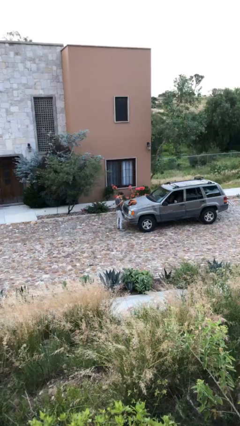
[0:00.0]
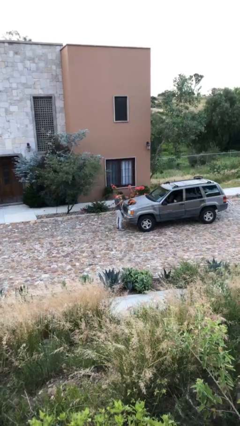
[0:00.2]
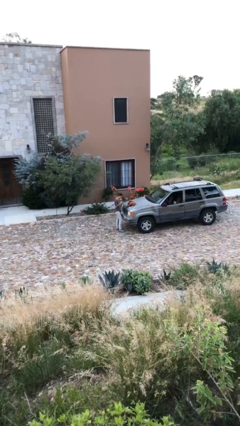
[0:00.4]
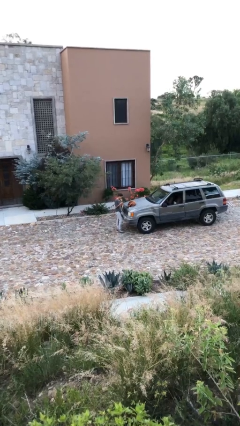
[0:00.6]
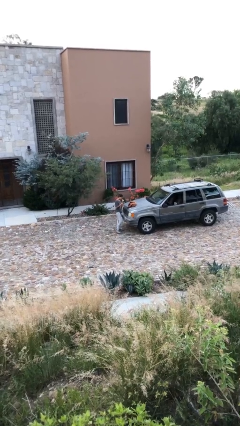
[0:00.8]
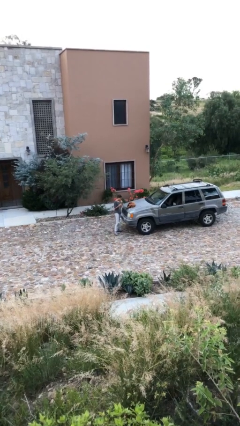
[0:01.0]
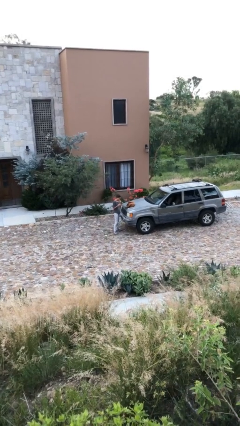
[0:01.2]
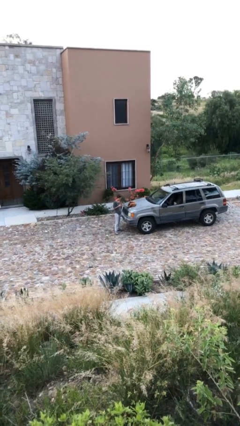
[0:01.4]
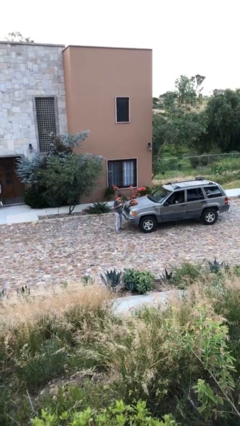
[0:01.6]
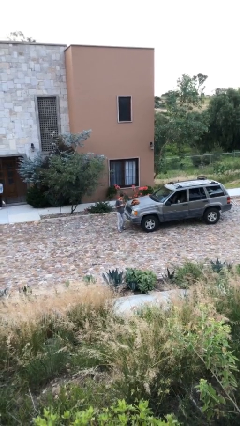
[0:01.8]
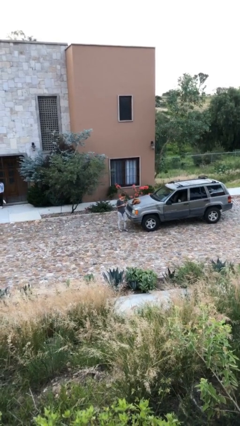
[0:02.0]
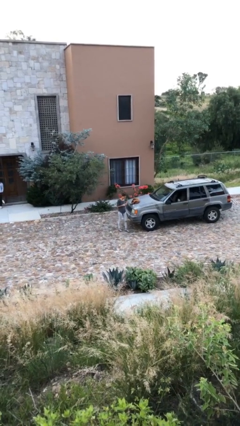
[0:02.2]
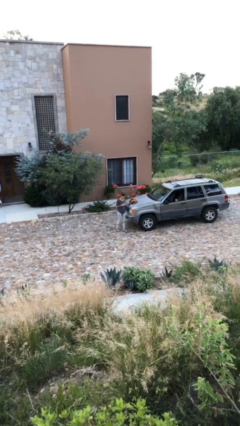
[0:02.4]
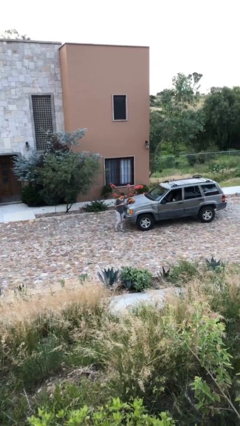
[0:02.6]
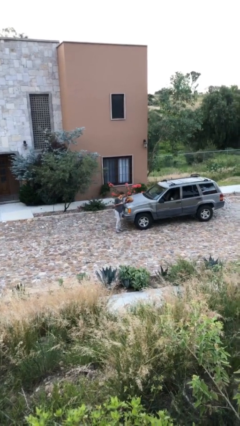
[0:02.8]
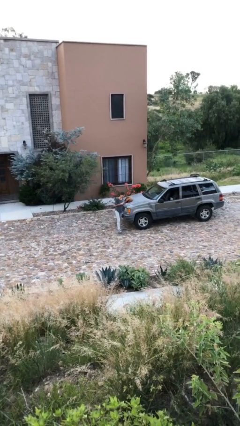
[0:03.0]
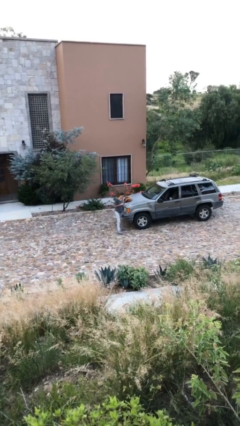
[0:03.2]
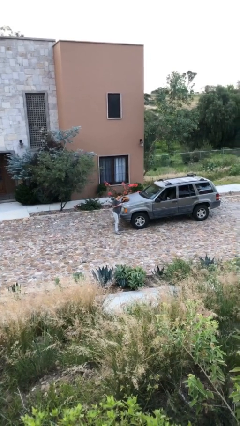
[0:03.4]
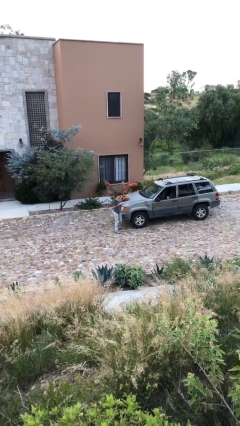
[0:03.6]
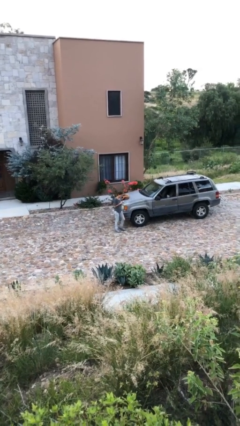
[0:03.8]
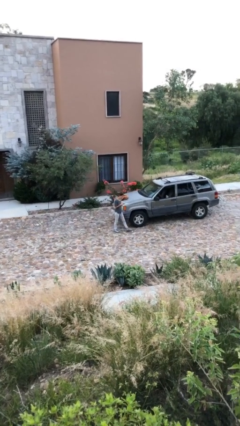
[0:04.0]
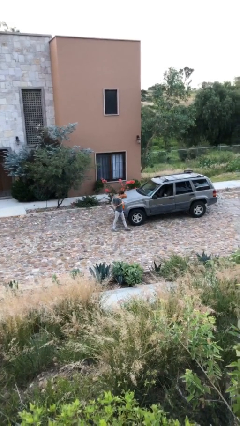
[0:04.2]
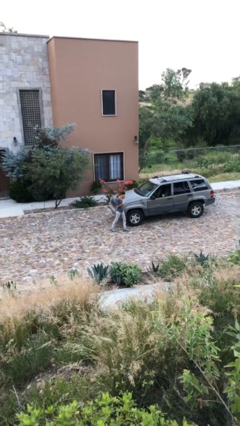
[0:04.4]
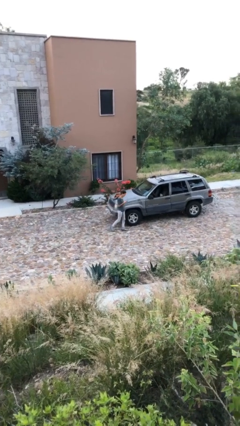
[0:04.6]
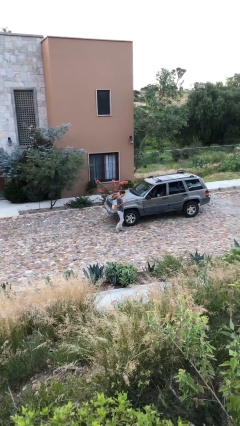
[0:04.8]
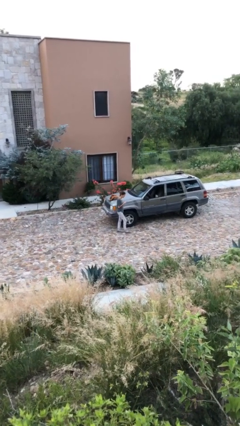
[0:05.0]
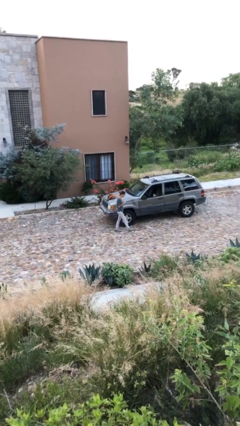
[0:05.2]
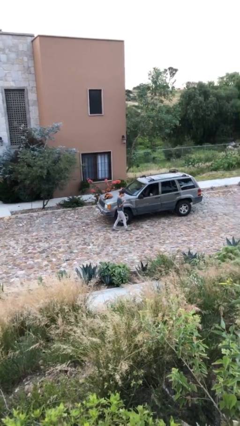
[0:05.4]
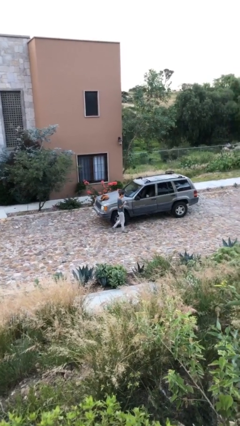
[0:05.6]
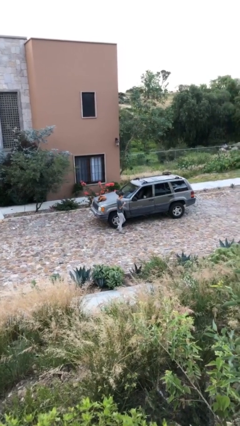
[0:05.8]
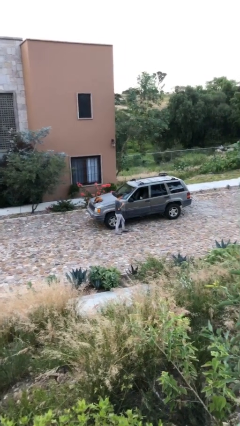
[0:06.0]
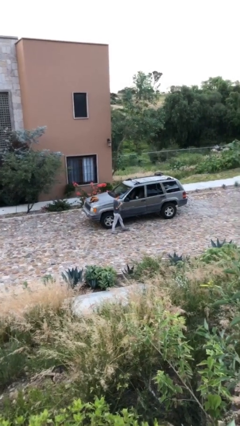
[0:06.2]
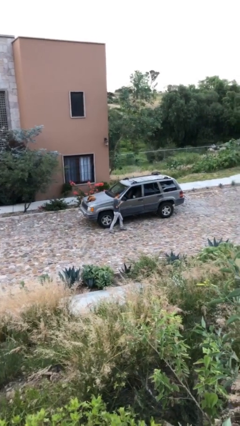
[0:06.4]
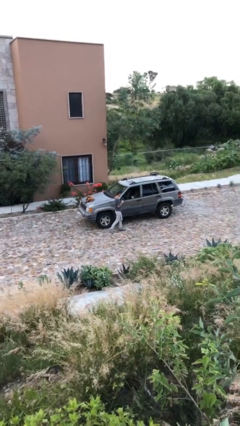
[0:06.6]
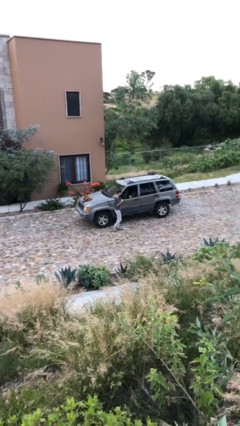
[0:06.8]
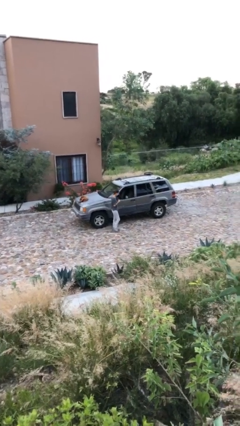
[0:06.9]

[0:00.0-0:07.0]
person texts on phone

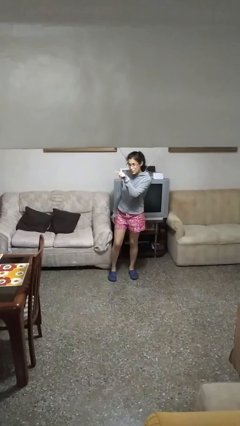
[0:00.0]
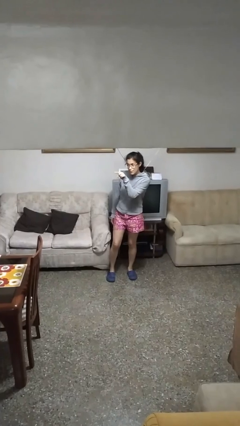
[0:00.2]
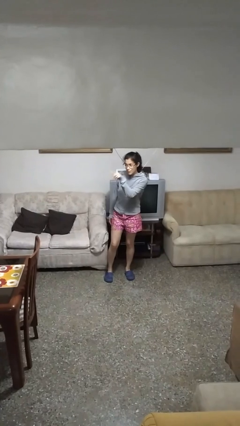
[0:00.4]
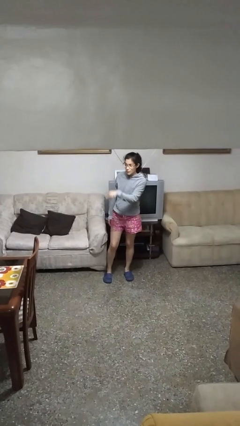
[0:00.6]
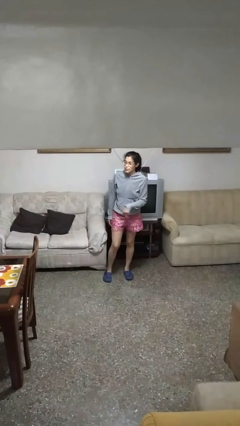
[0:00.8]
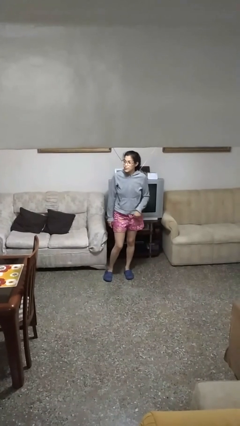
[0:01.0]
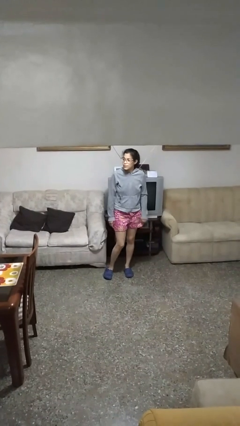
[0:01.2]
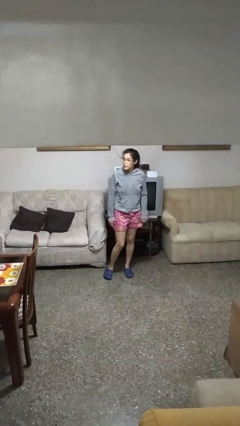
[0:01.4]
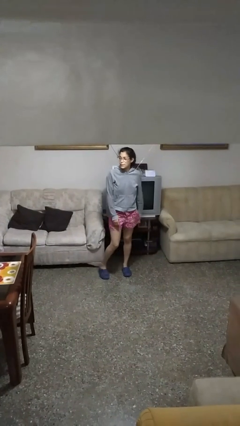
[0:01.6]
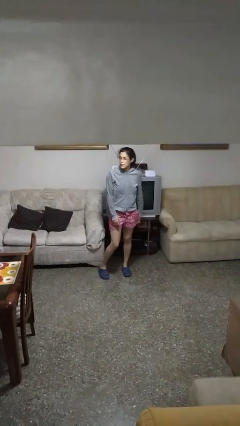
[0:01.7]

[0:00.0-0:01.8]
person points at person

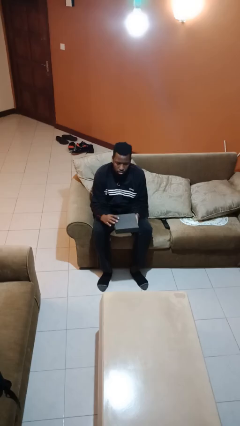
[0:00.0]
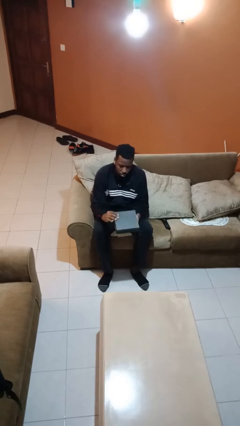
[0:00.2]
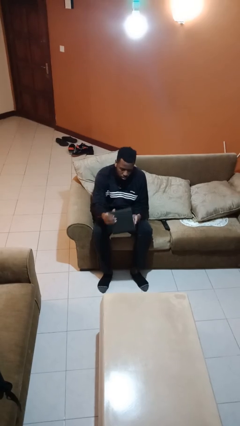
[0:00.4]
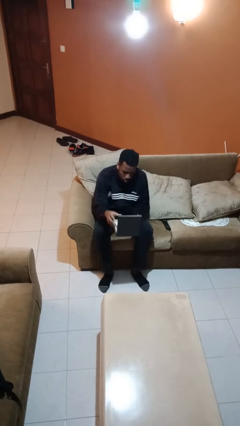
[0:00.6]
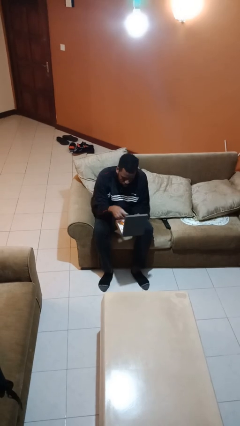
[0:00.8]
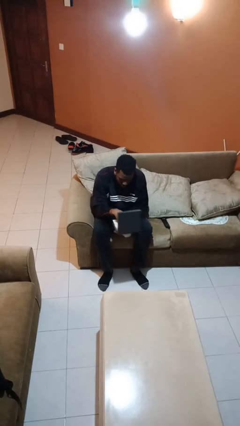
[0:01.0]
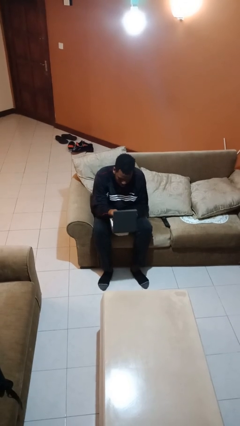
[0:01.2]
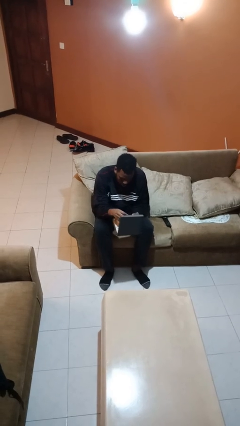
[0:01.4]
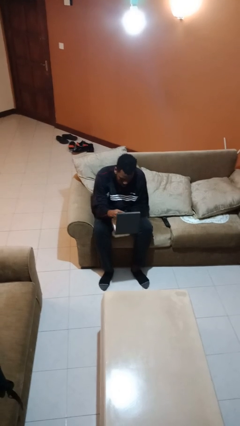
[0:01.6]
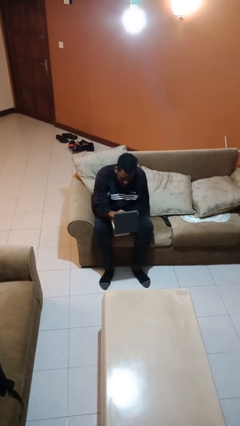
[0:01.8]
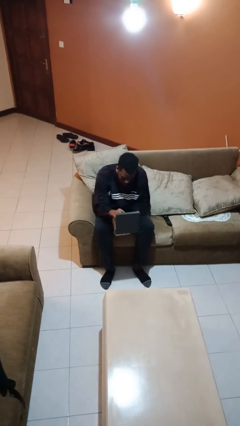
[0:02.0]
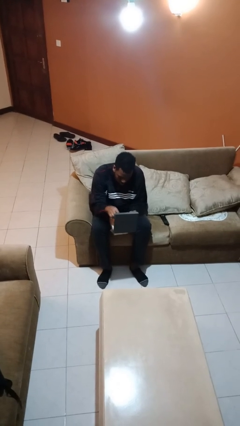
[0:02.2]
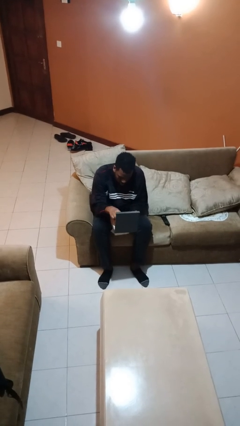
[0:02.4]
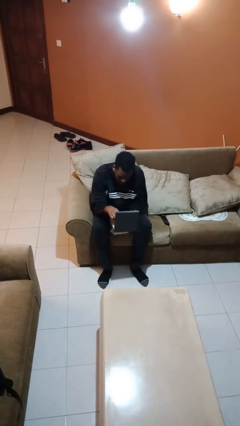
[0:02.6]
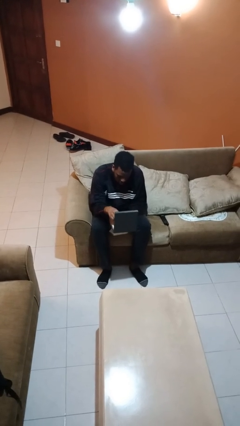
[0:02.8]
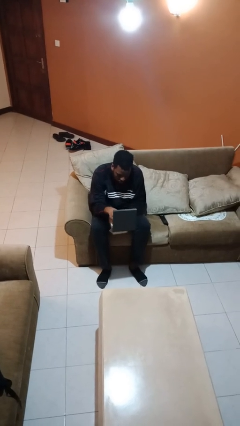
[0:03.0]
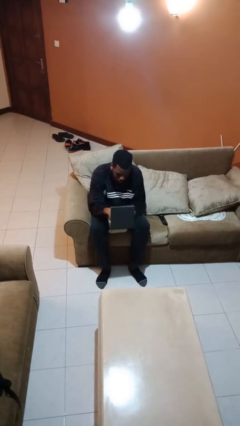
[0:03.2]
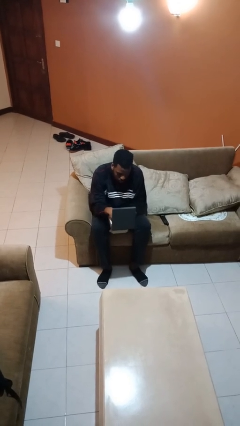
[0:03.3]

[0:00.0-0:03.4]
person opens jewelry box

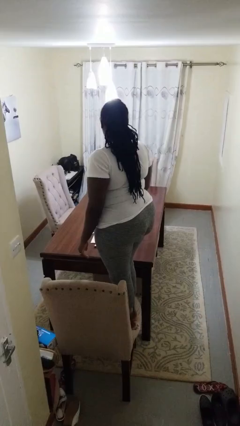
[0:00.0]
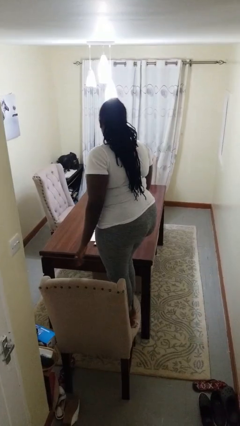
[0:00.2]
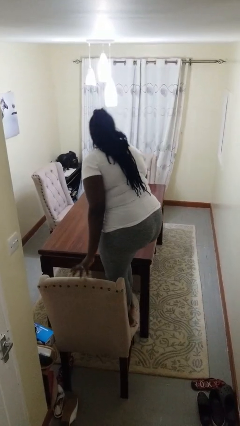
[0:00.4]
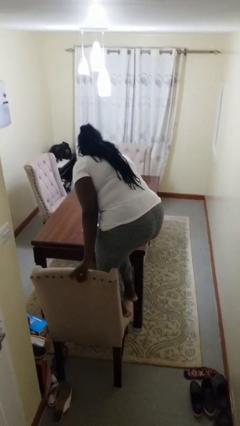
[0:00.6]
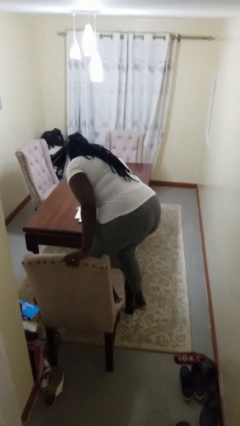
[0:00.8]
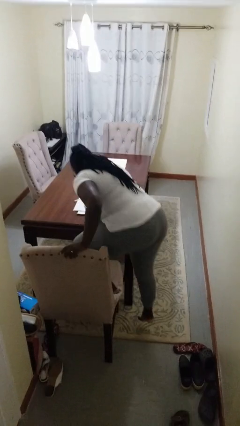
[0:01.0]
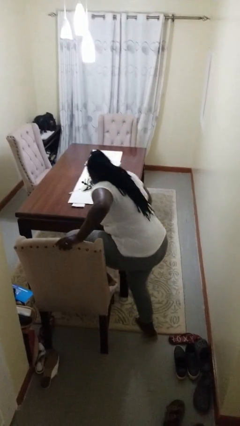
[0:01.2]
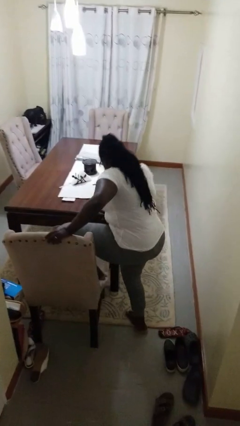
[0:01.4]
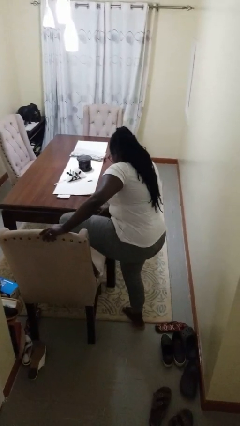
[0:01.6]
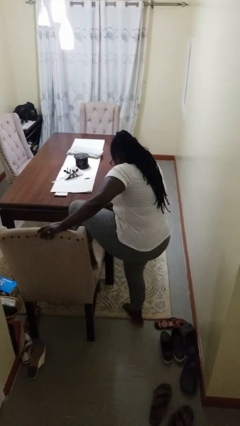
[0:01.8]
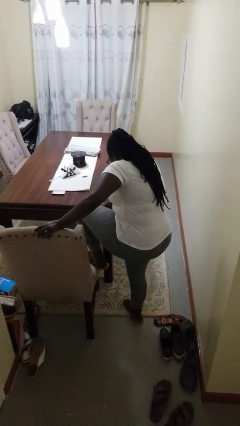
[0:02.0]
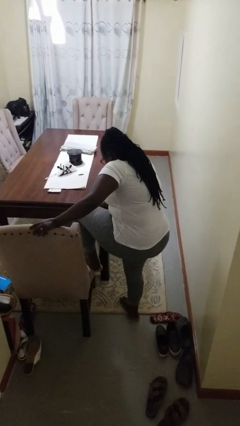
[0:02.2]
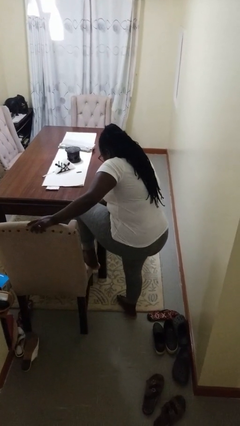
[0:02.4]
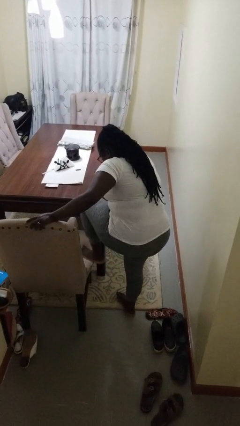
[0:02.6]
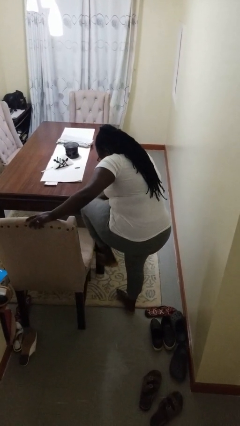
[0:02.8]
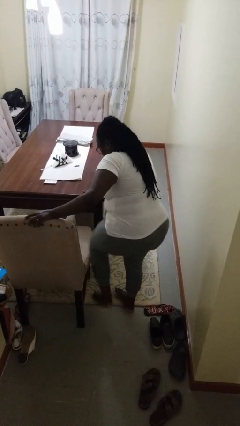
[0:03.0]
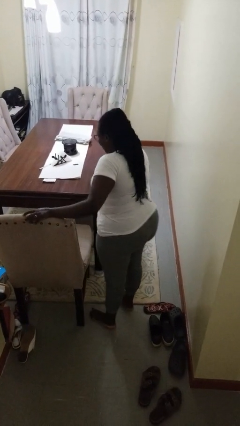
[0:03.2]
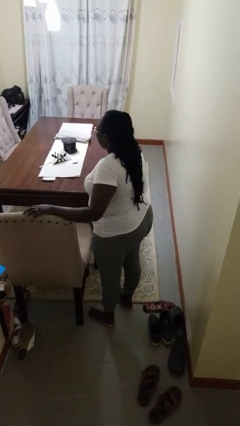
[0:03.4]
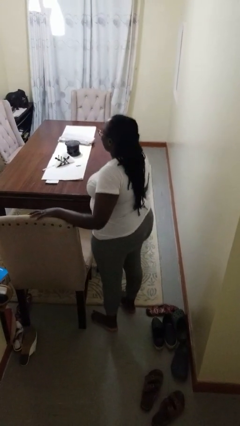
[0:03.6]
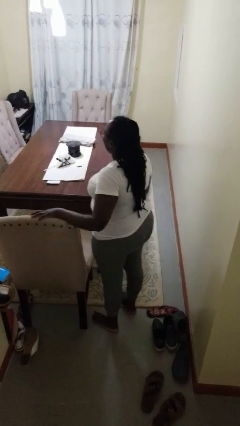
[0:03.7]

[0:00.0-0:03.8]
person climbs off chair

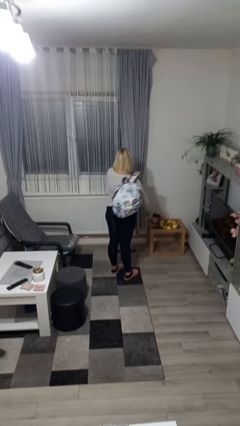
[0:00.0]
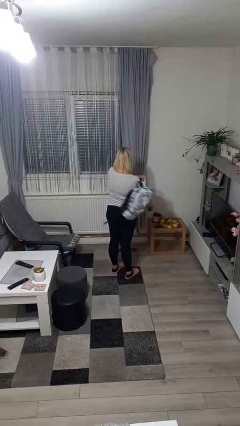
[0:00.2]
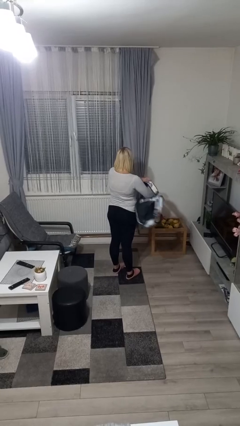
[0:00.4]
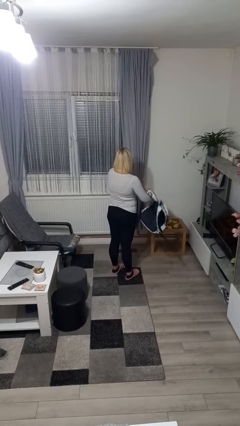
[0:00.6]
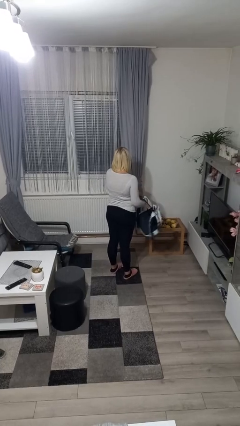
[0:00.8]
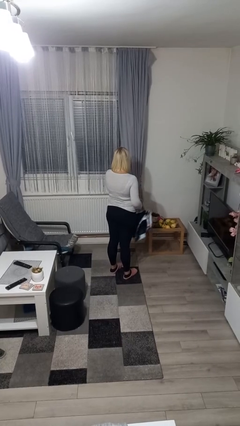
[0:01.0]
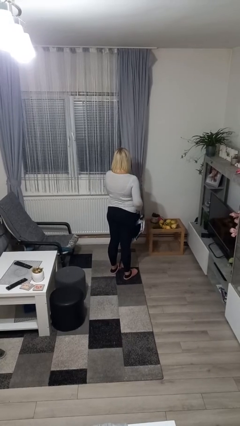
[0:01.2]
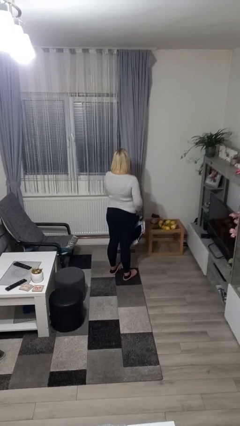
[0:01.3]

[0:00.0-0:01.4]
person takes off backpack

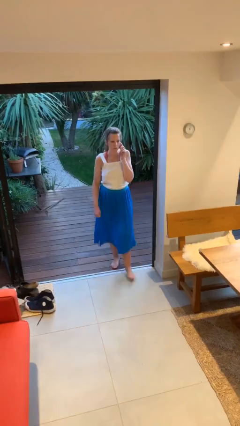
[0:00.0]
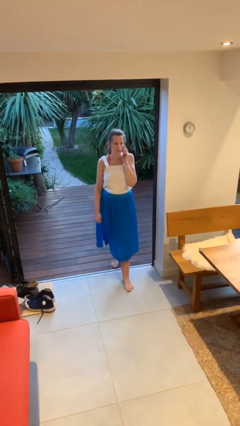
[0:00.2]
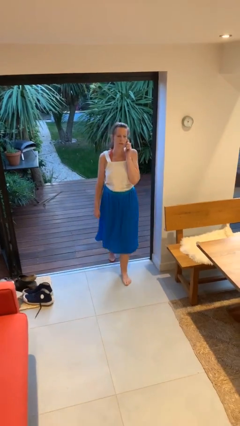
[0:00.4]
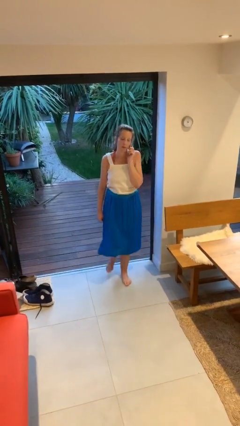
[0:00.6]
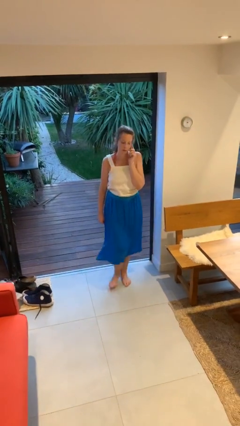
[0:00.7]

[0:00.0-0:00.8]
person enters scene through structure
